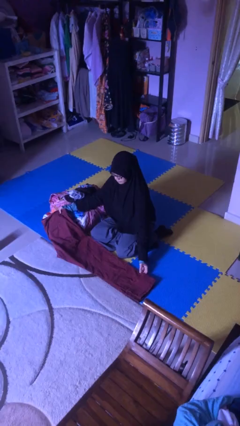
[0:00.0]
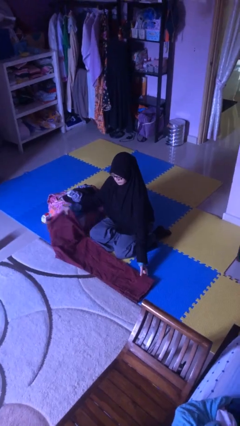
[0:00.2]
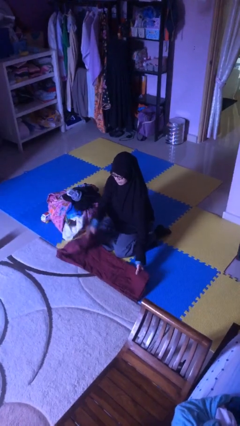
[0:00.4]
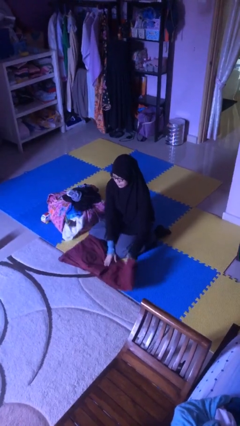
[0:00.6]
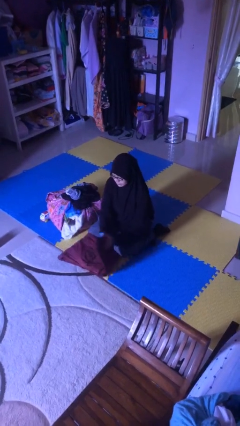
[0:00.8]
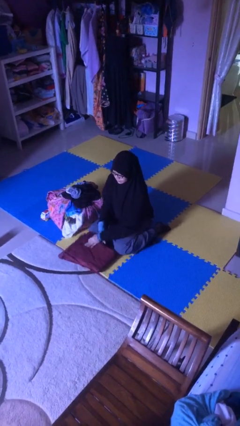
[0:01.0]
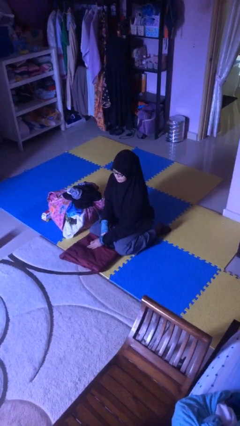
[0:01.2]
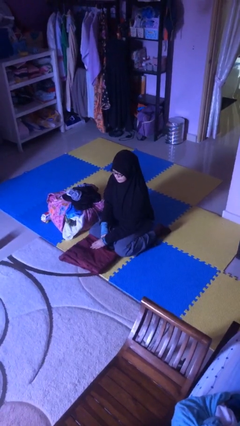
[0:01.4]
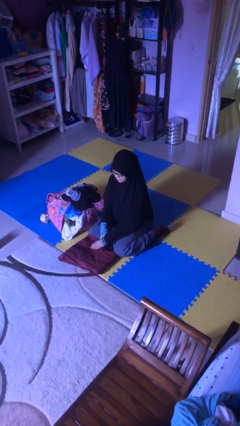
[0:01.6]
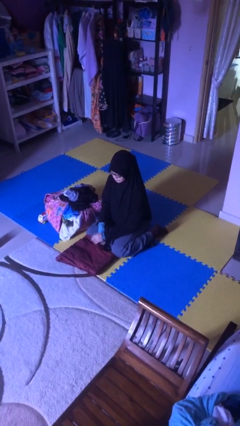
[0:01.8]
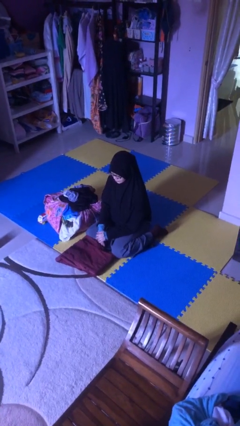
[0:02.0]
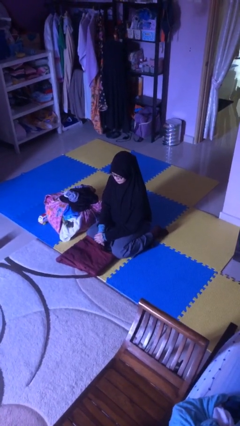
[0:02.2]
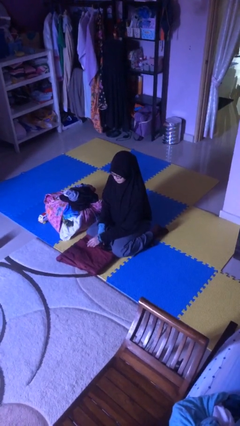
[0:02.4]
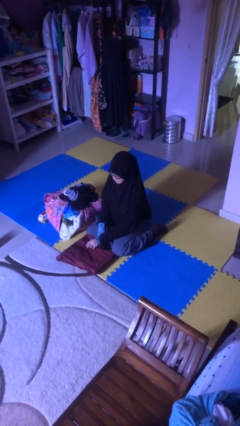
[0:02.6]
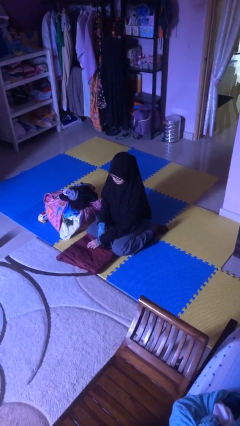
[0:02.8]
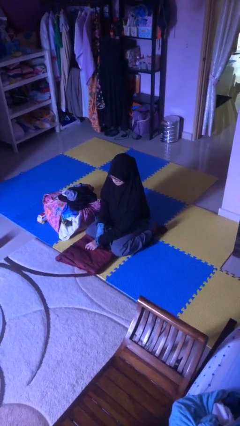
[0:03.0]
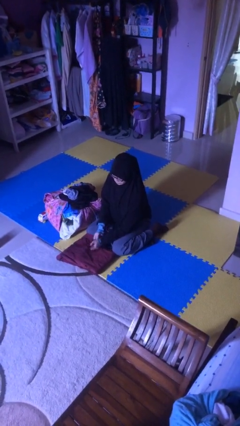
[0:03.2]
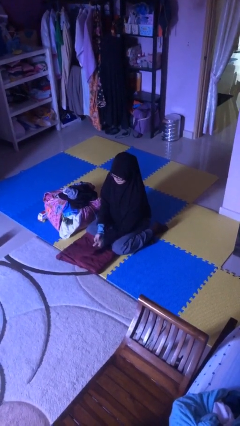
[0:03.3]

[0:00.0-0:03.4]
person folds pants

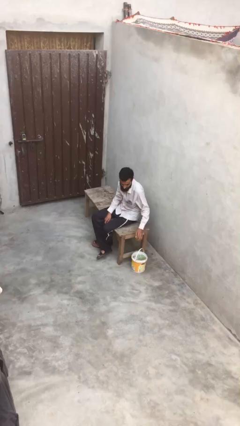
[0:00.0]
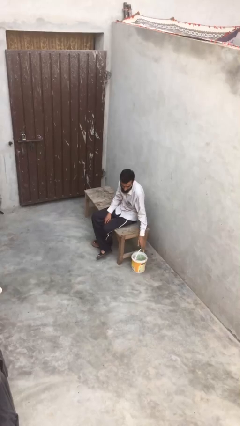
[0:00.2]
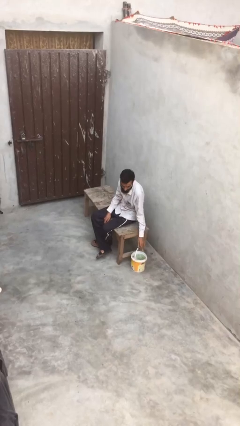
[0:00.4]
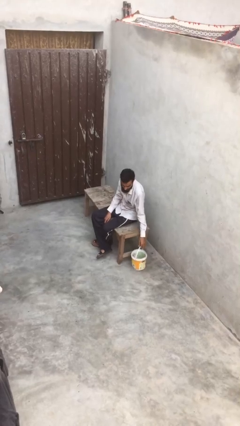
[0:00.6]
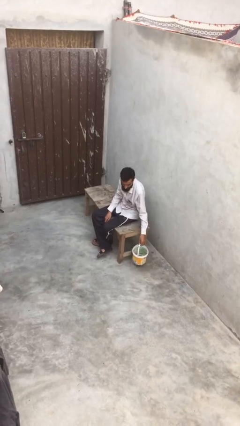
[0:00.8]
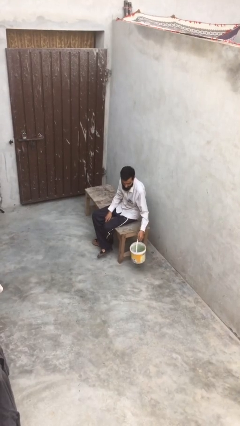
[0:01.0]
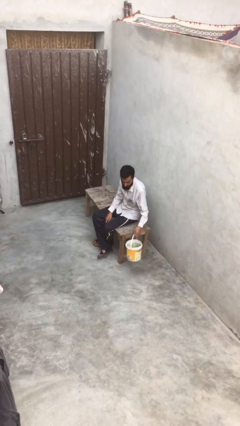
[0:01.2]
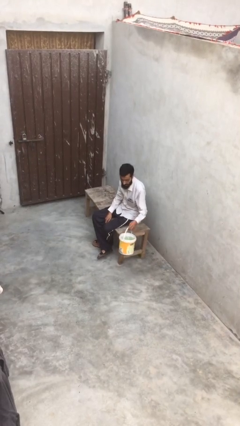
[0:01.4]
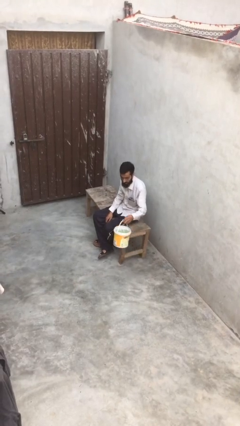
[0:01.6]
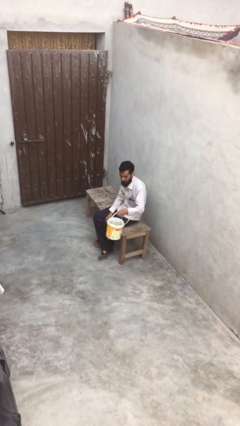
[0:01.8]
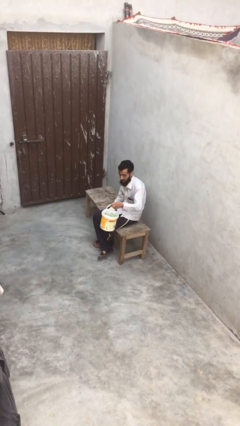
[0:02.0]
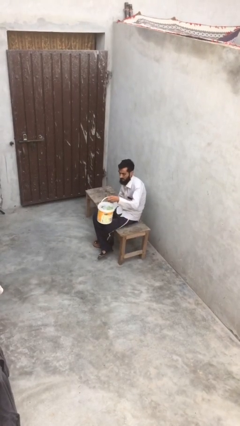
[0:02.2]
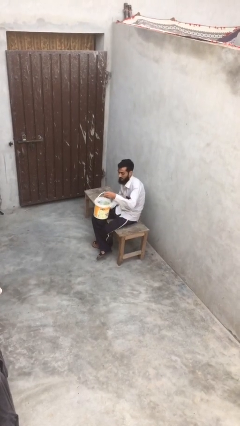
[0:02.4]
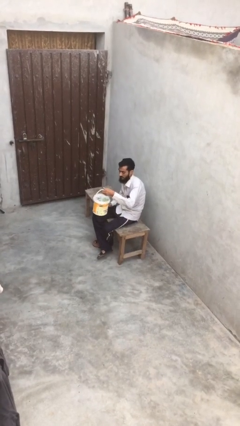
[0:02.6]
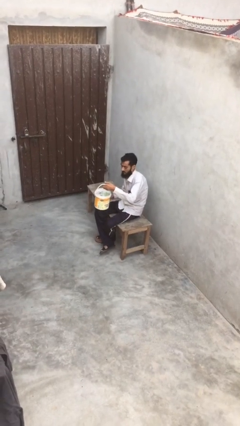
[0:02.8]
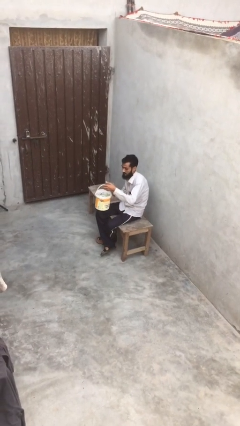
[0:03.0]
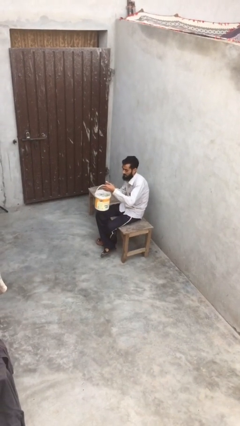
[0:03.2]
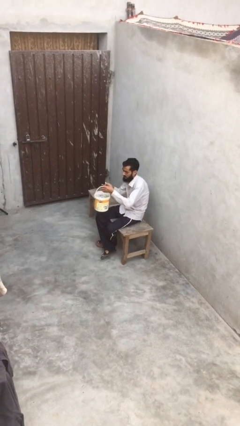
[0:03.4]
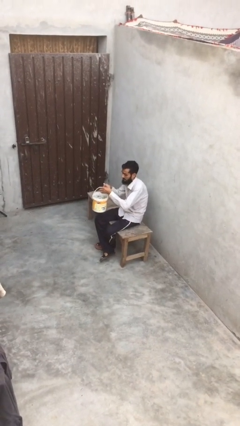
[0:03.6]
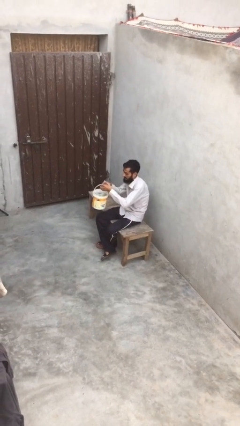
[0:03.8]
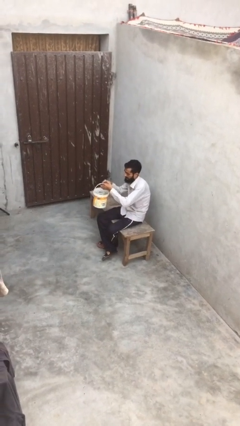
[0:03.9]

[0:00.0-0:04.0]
person picks up object from floor

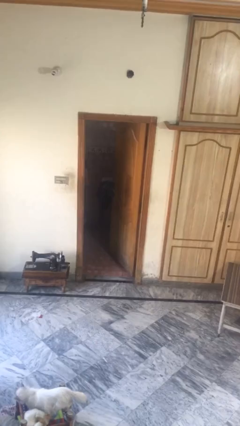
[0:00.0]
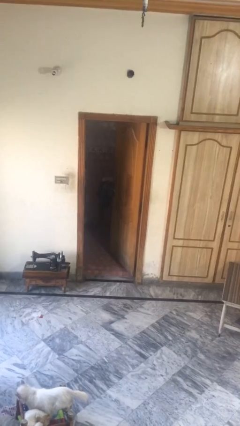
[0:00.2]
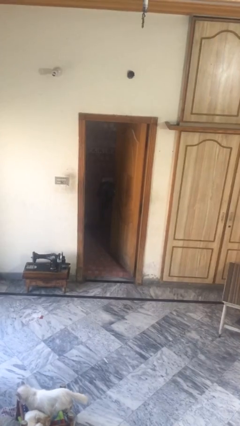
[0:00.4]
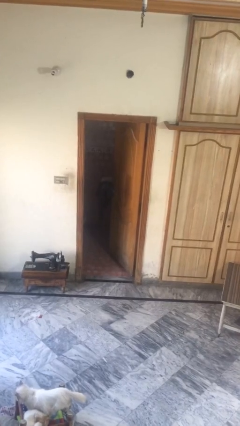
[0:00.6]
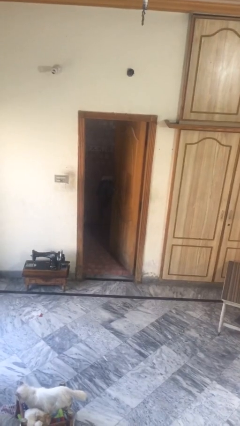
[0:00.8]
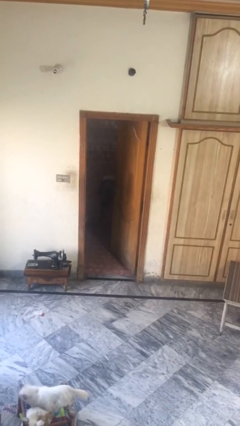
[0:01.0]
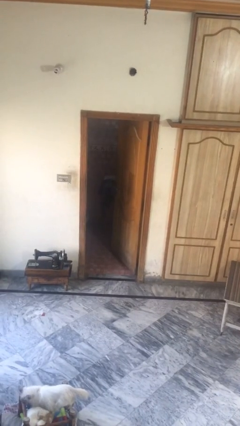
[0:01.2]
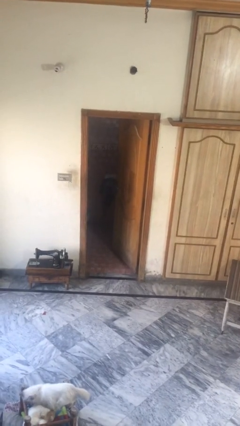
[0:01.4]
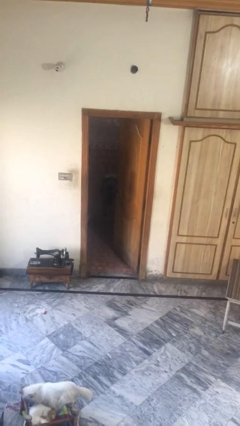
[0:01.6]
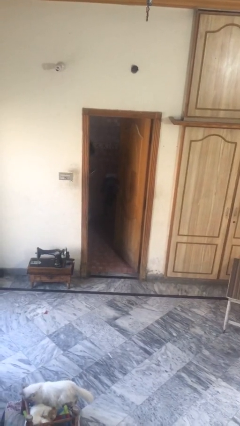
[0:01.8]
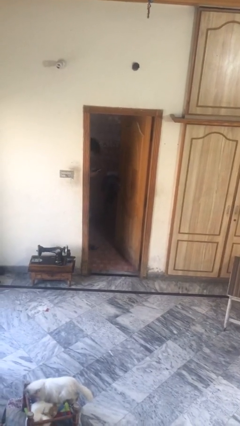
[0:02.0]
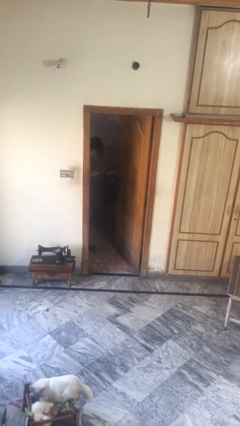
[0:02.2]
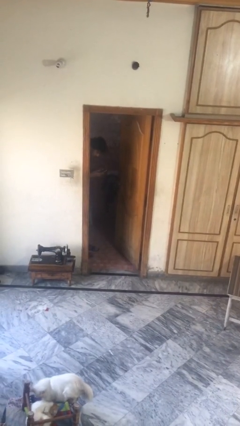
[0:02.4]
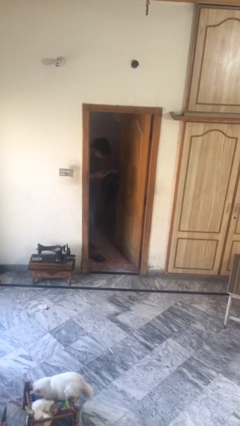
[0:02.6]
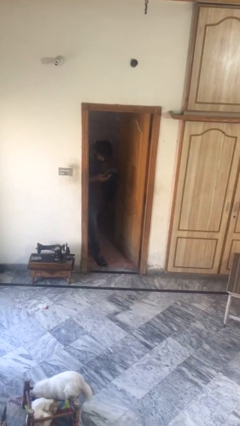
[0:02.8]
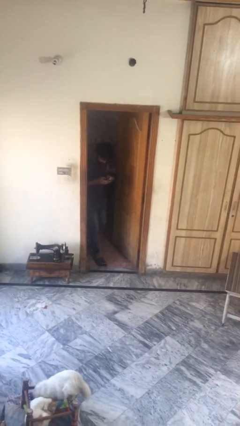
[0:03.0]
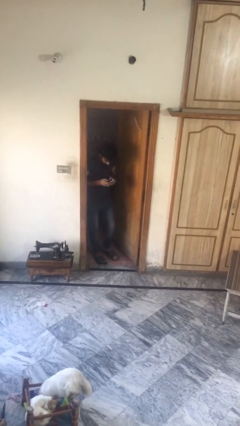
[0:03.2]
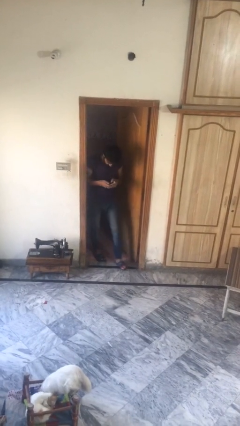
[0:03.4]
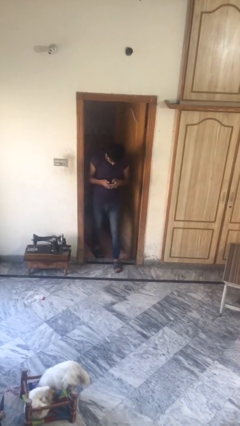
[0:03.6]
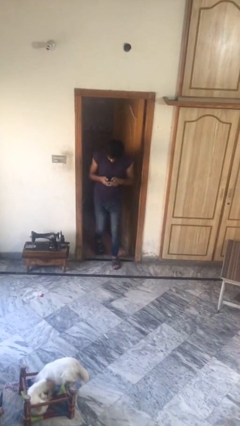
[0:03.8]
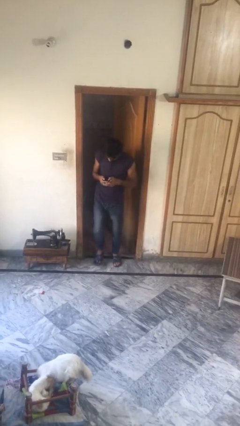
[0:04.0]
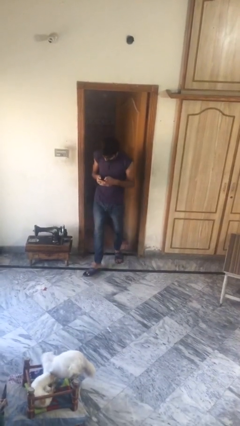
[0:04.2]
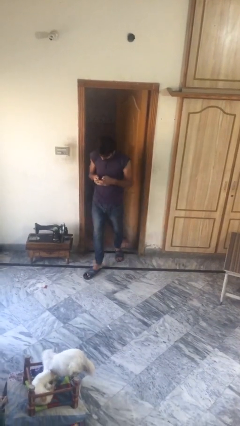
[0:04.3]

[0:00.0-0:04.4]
person enters scene through structure

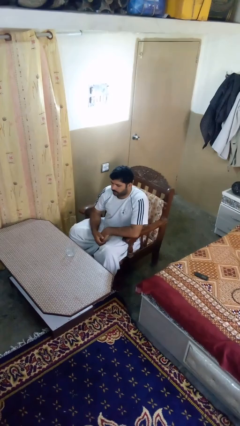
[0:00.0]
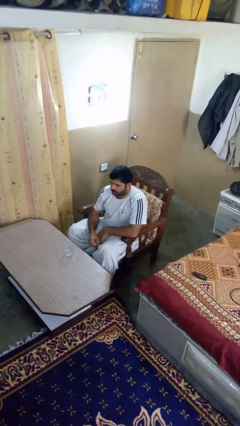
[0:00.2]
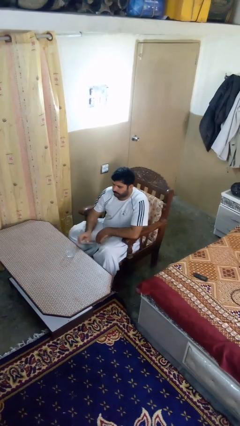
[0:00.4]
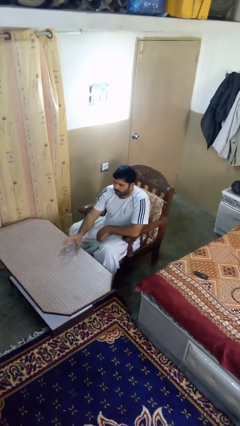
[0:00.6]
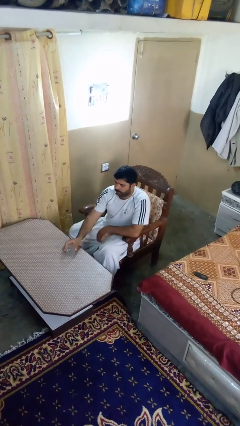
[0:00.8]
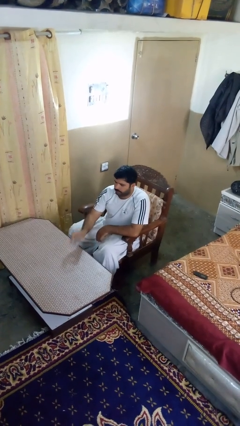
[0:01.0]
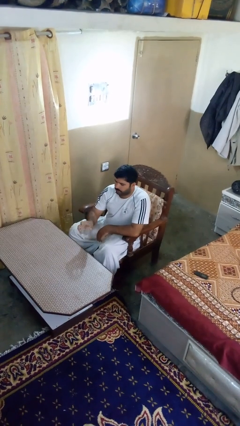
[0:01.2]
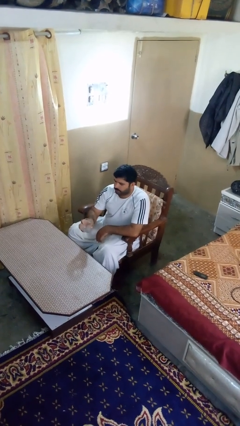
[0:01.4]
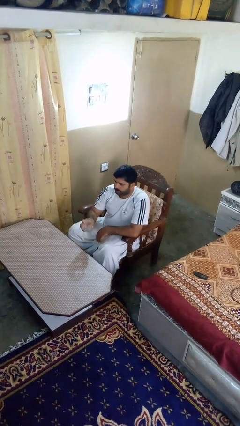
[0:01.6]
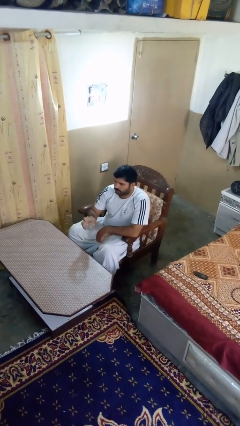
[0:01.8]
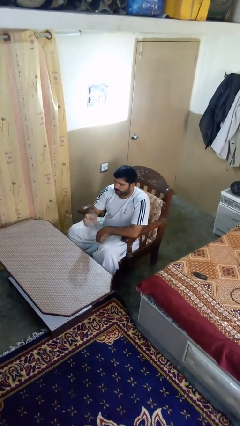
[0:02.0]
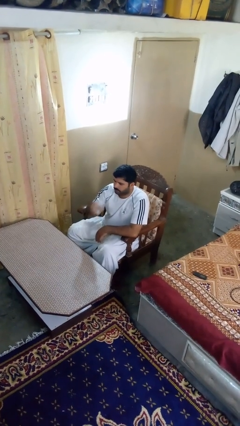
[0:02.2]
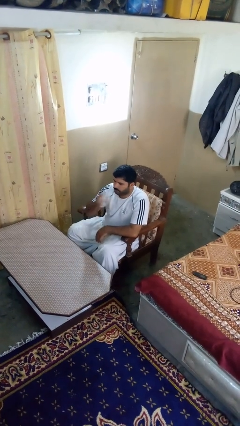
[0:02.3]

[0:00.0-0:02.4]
person picks up object from table

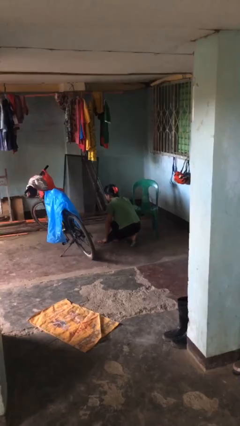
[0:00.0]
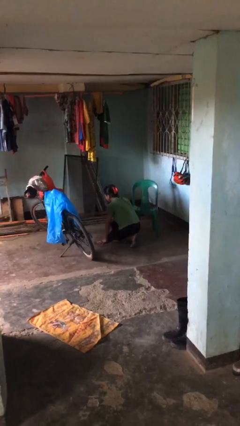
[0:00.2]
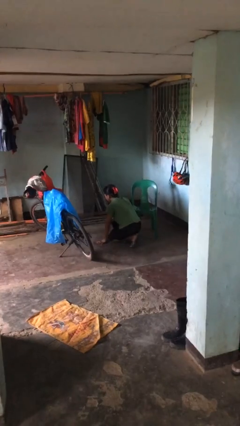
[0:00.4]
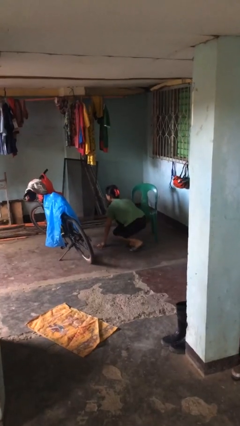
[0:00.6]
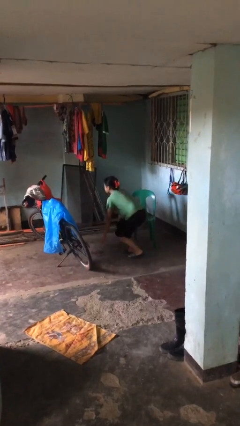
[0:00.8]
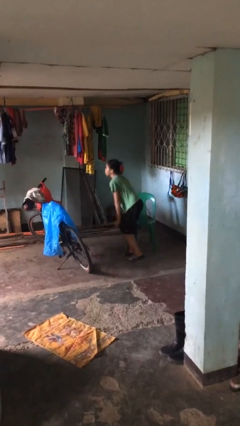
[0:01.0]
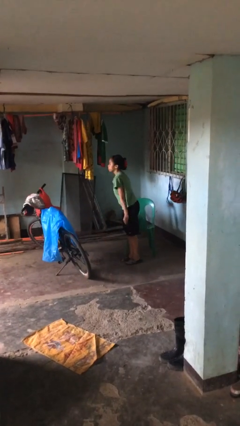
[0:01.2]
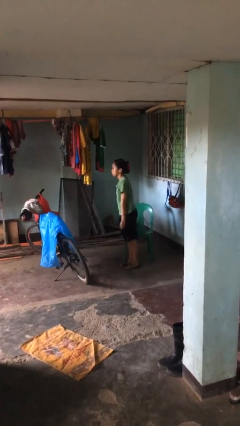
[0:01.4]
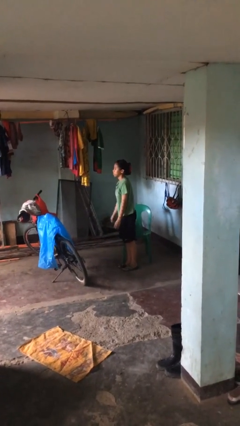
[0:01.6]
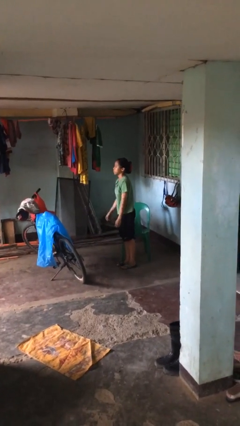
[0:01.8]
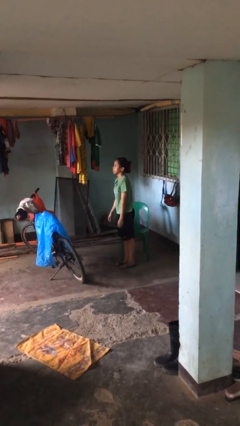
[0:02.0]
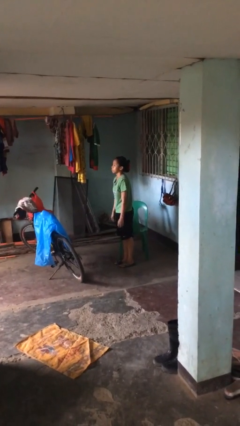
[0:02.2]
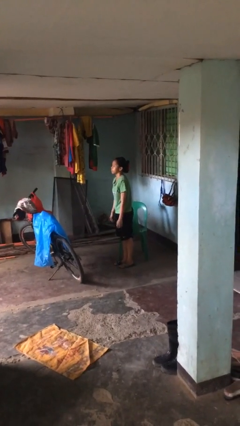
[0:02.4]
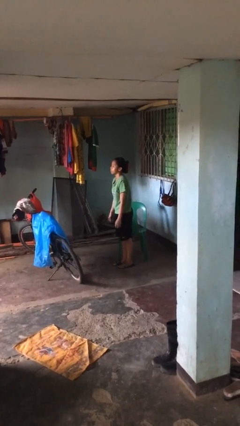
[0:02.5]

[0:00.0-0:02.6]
person stands up from floor

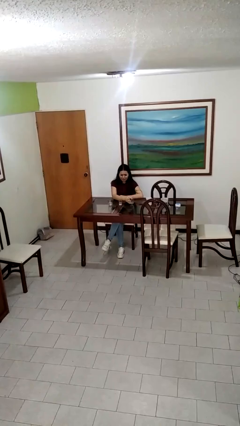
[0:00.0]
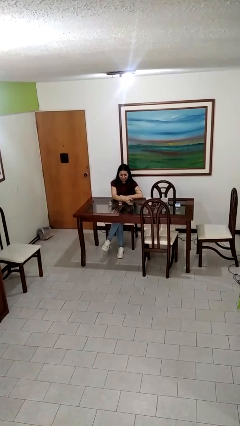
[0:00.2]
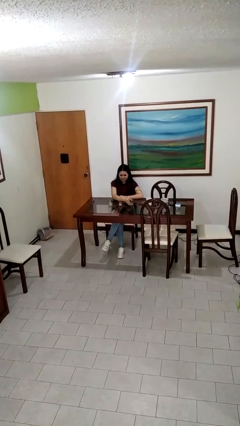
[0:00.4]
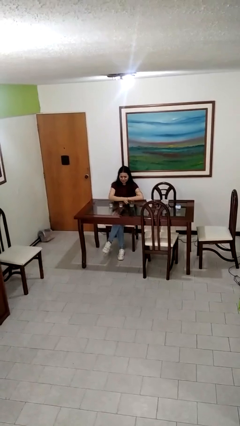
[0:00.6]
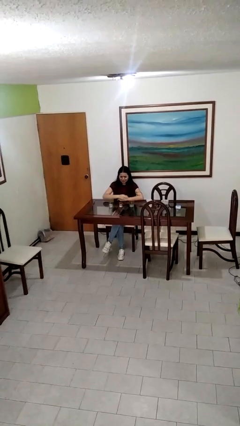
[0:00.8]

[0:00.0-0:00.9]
person puts down object on table
